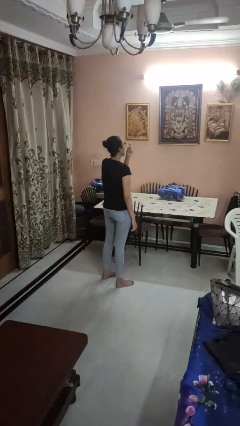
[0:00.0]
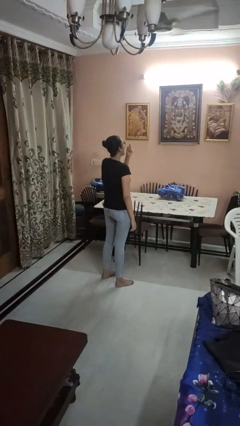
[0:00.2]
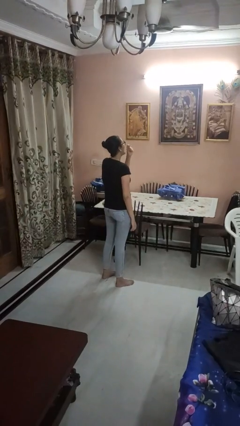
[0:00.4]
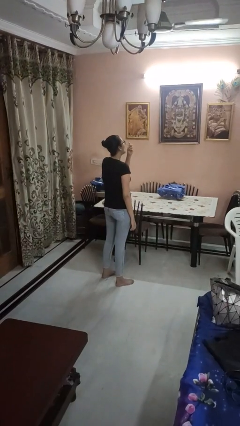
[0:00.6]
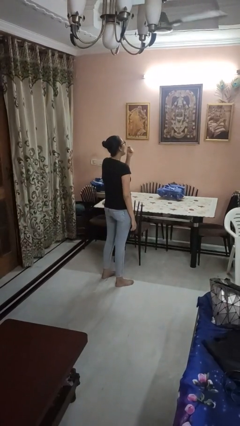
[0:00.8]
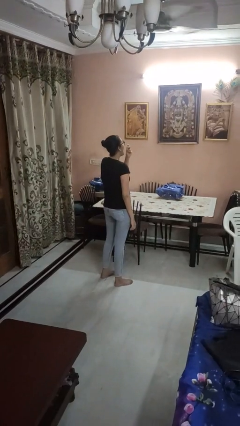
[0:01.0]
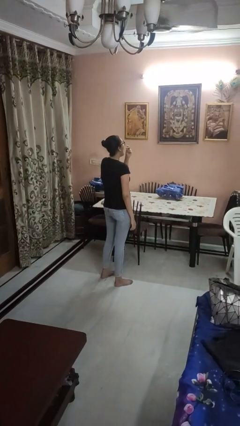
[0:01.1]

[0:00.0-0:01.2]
person yawns

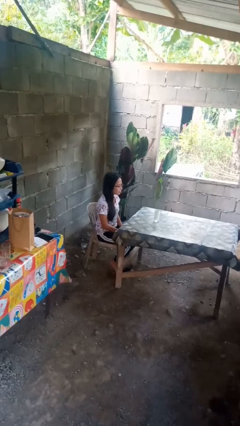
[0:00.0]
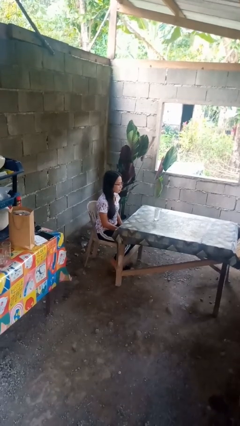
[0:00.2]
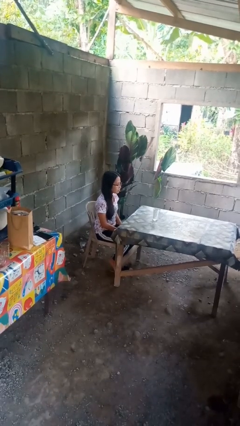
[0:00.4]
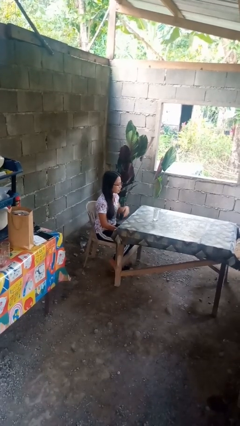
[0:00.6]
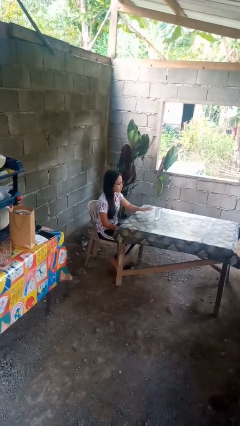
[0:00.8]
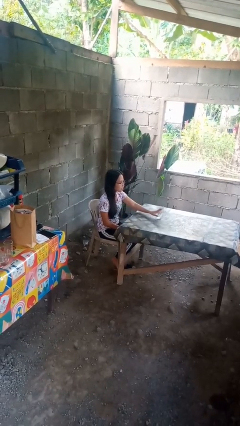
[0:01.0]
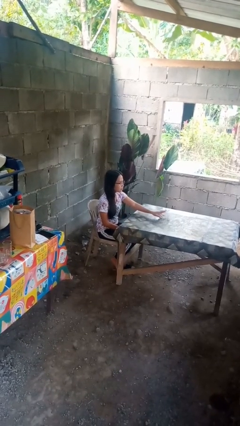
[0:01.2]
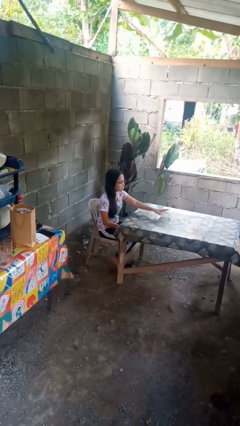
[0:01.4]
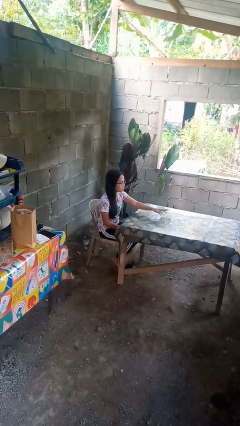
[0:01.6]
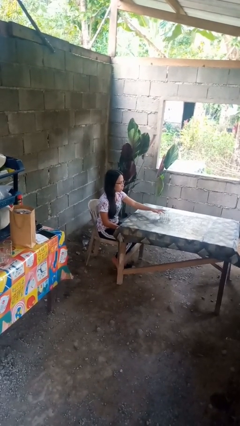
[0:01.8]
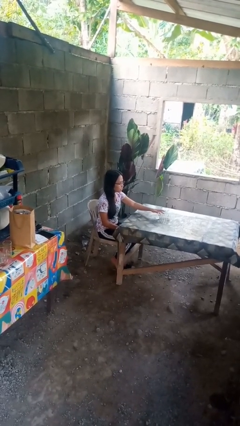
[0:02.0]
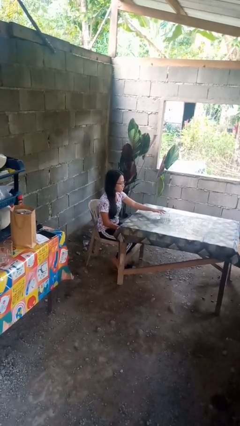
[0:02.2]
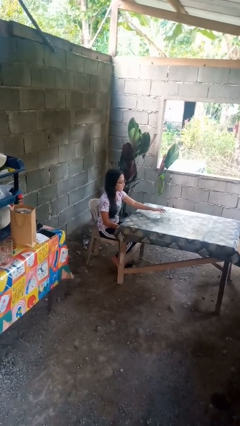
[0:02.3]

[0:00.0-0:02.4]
person knocks over glass

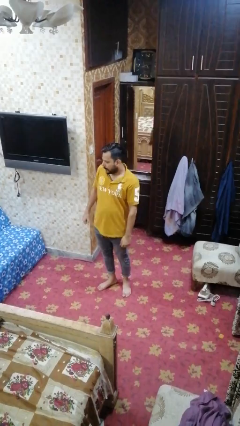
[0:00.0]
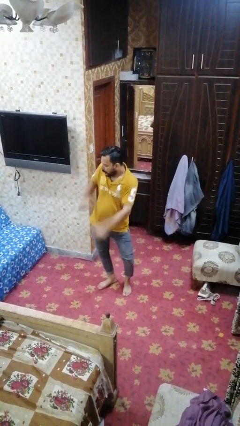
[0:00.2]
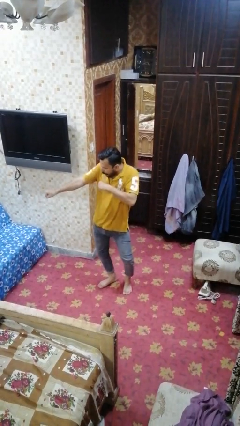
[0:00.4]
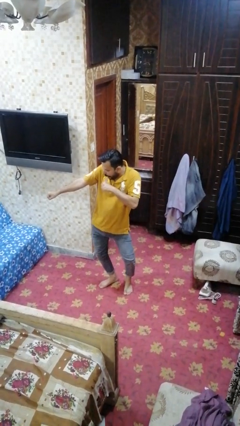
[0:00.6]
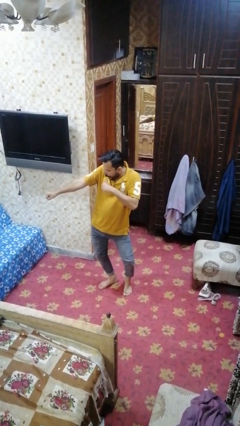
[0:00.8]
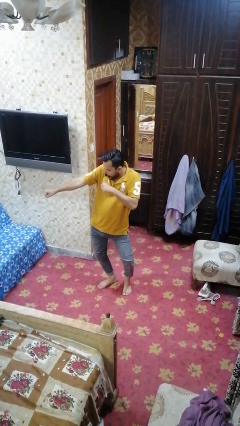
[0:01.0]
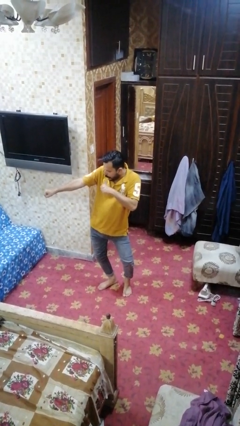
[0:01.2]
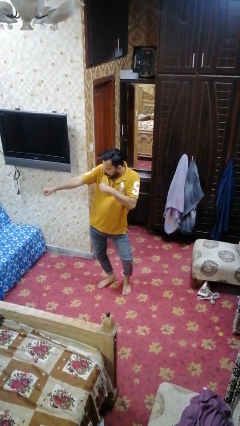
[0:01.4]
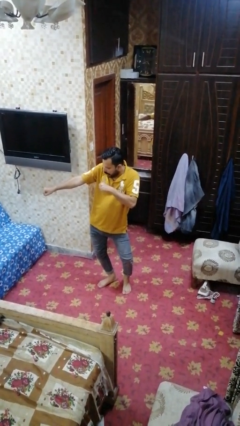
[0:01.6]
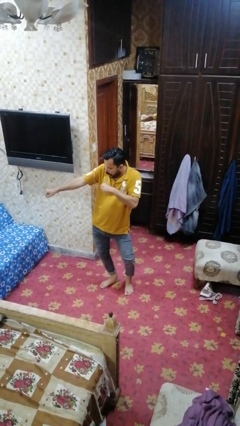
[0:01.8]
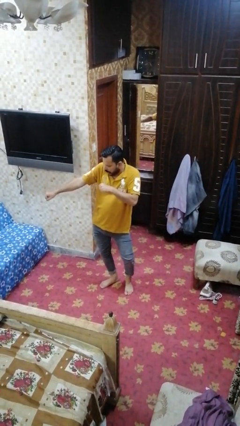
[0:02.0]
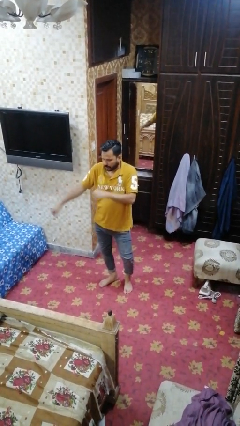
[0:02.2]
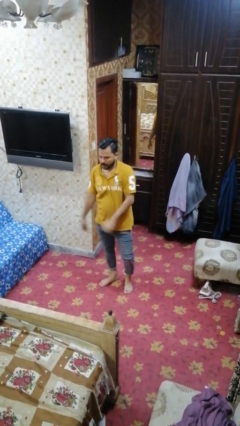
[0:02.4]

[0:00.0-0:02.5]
person karate chop

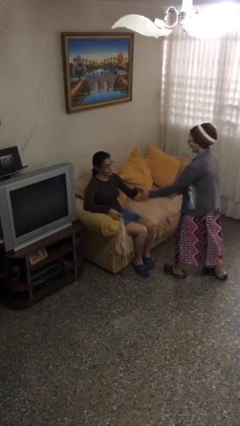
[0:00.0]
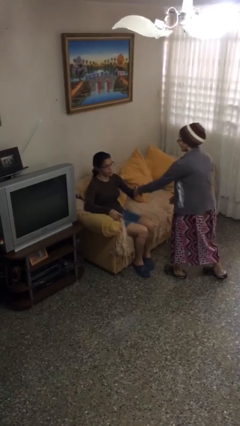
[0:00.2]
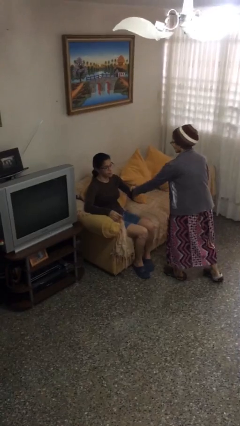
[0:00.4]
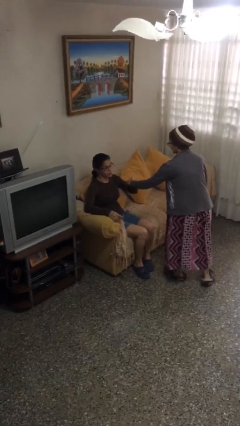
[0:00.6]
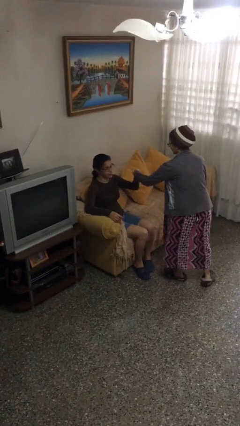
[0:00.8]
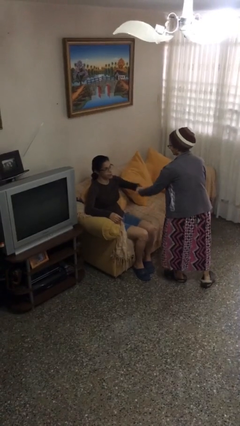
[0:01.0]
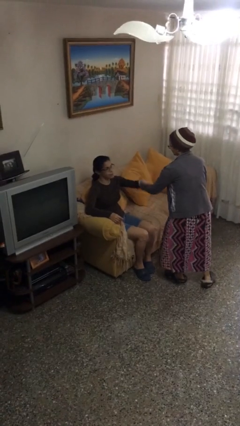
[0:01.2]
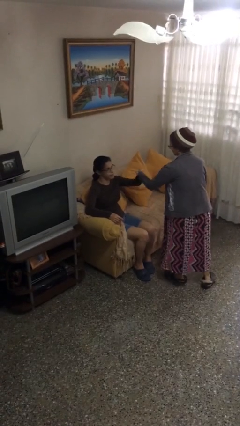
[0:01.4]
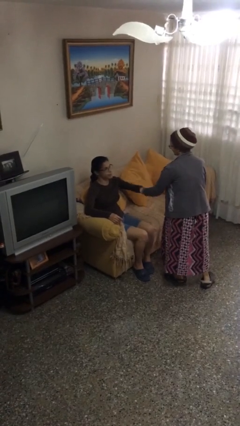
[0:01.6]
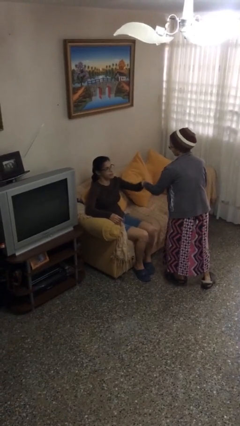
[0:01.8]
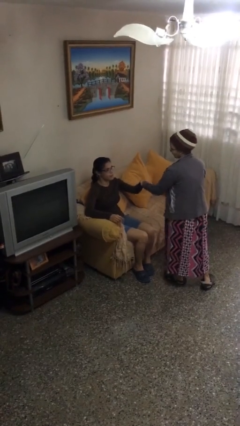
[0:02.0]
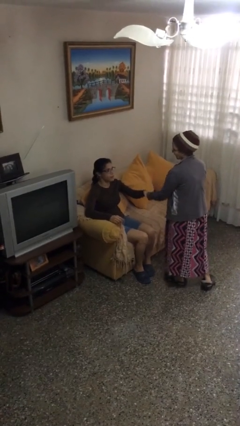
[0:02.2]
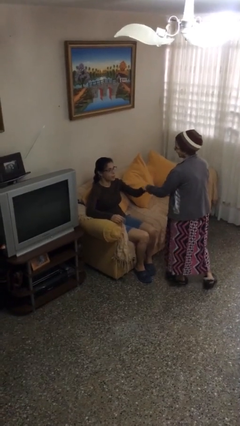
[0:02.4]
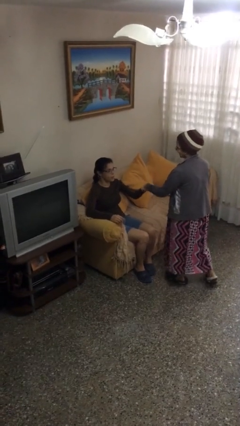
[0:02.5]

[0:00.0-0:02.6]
person shakes hand

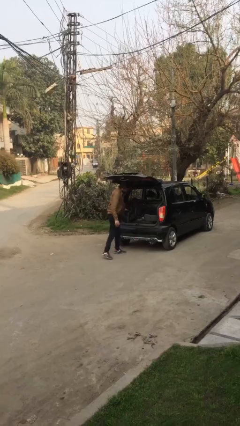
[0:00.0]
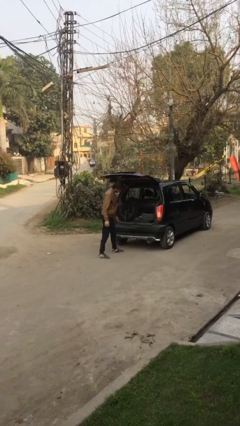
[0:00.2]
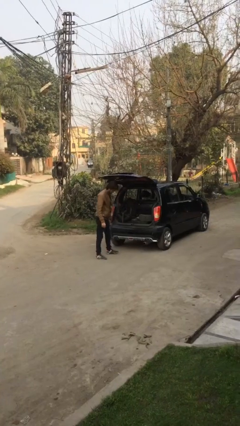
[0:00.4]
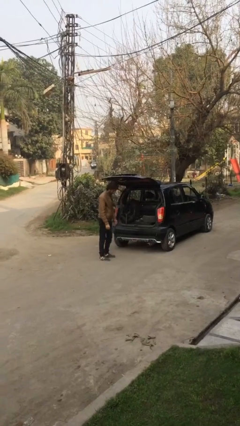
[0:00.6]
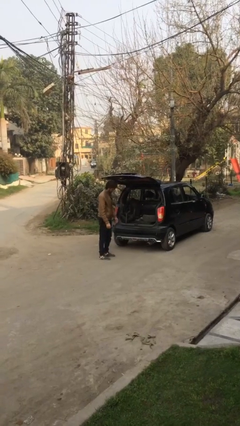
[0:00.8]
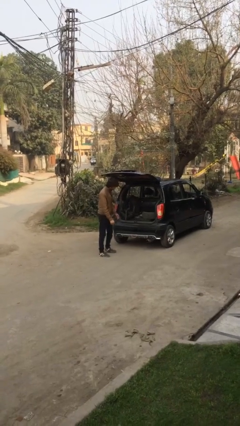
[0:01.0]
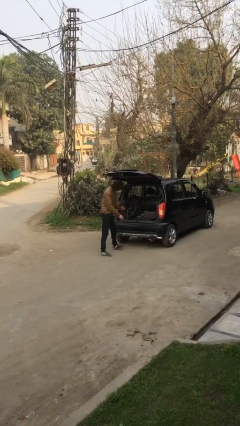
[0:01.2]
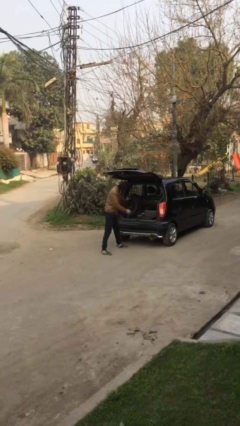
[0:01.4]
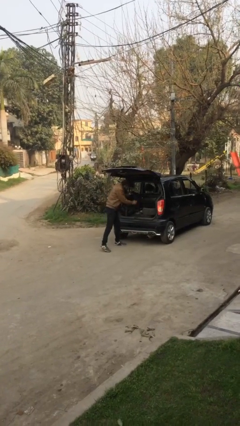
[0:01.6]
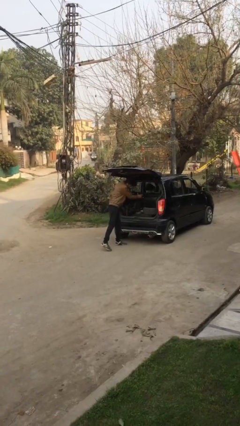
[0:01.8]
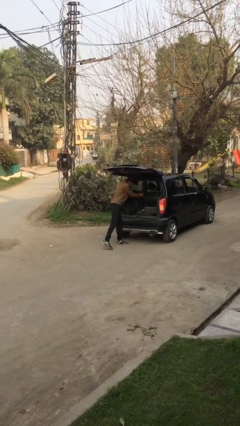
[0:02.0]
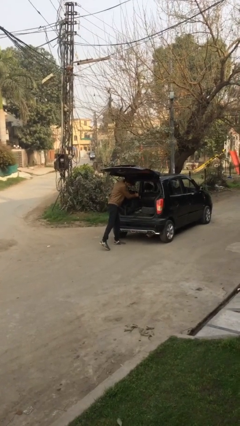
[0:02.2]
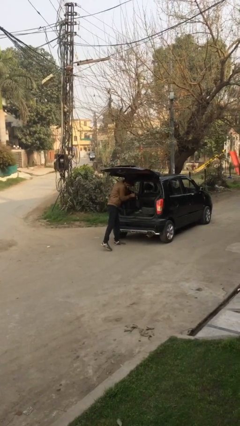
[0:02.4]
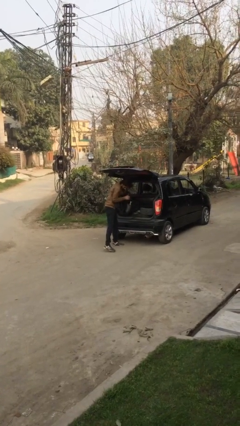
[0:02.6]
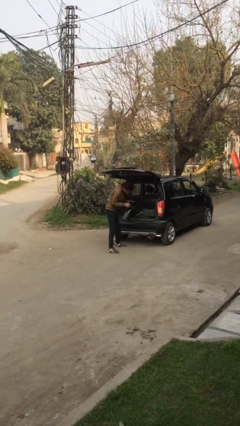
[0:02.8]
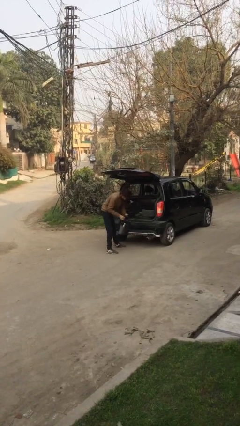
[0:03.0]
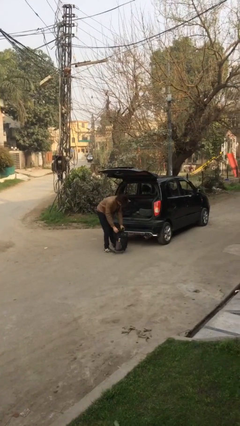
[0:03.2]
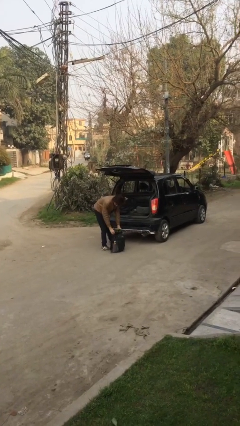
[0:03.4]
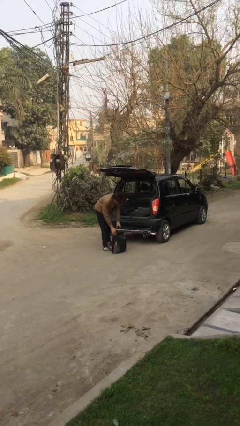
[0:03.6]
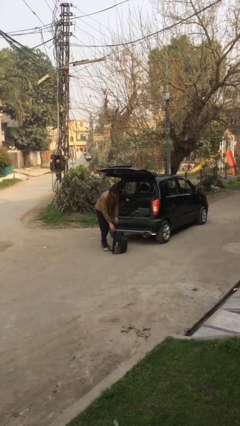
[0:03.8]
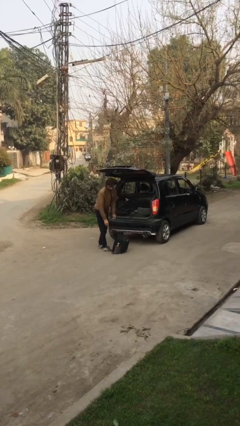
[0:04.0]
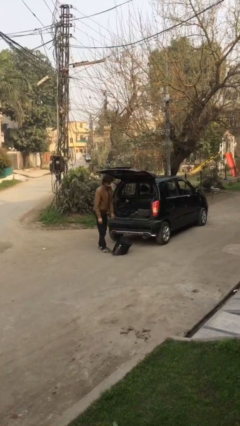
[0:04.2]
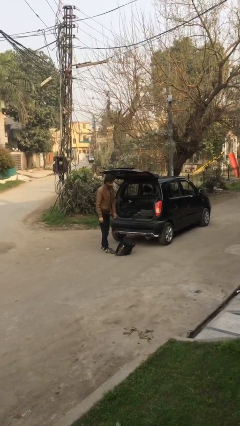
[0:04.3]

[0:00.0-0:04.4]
person unloads car

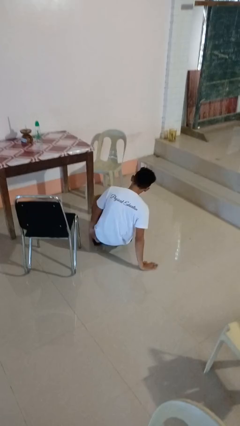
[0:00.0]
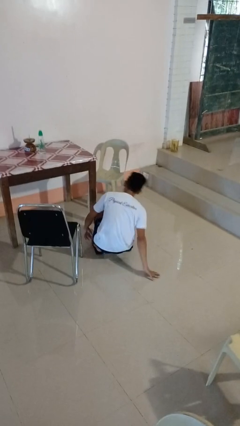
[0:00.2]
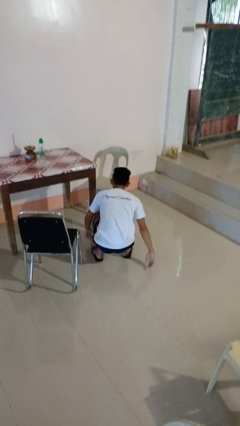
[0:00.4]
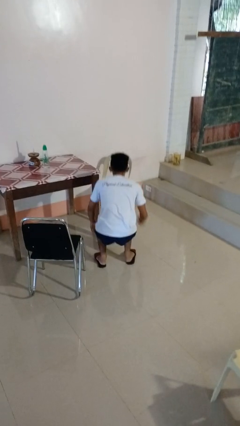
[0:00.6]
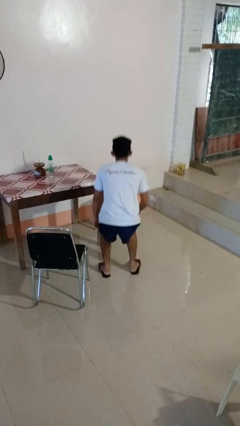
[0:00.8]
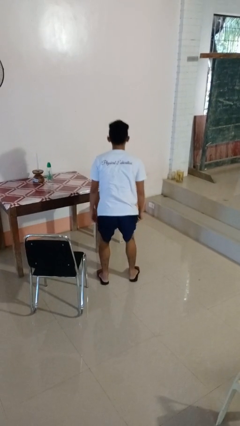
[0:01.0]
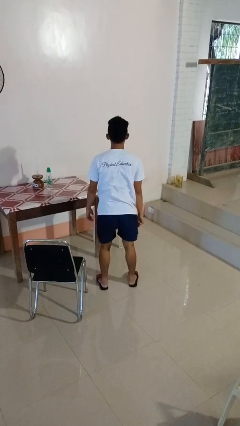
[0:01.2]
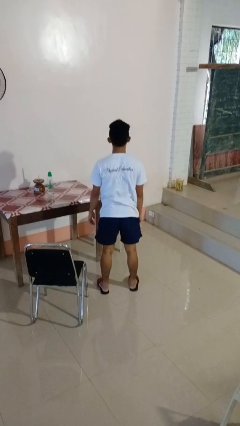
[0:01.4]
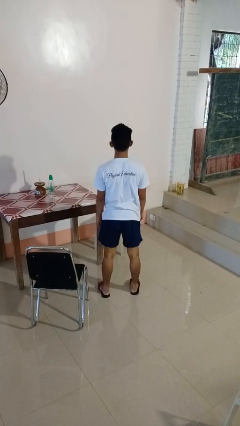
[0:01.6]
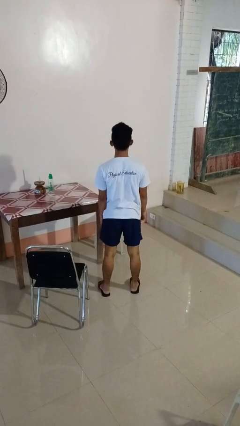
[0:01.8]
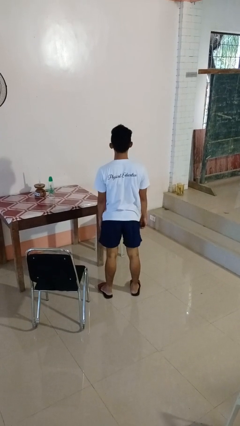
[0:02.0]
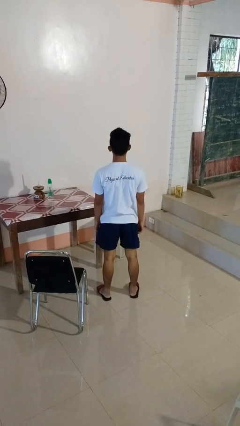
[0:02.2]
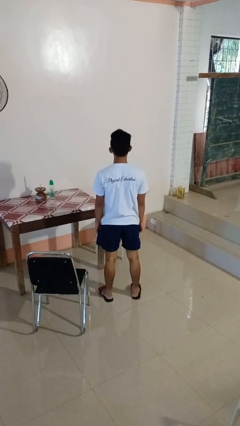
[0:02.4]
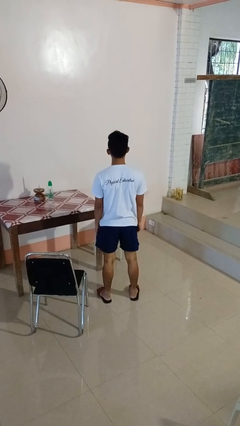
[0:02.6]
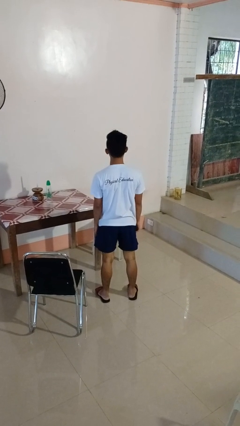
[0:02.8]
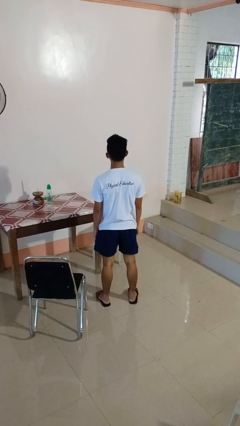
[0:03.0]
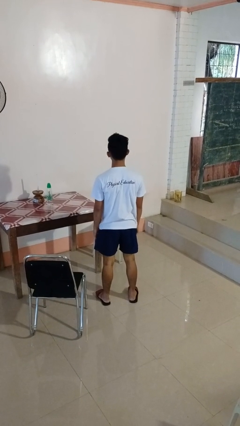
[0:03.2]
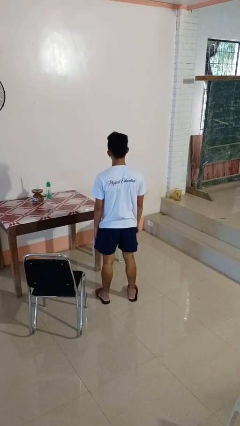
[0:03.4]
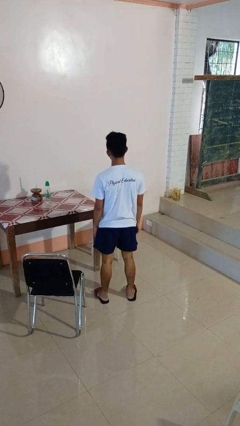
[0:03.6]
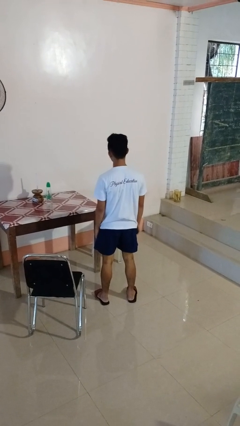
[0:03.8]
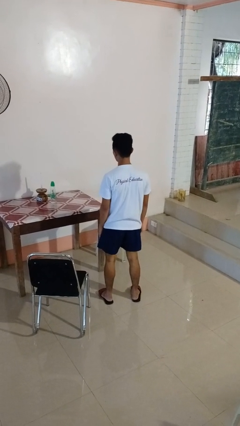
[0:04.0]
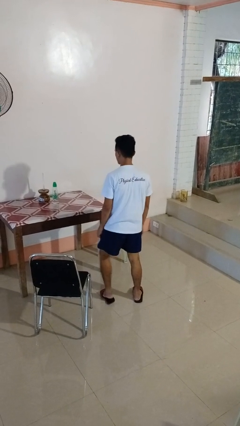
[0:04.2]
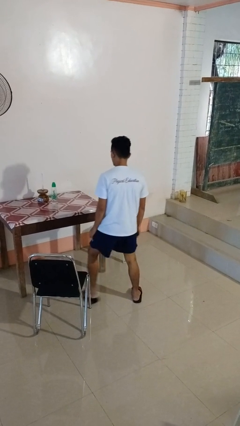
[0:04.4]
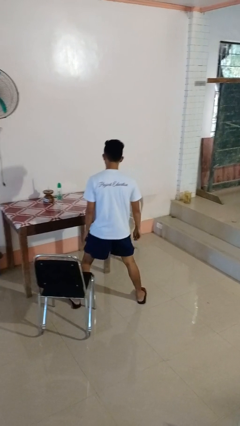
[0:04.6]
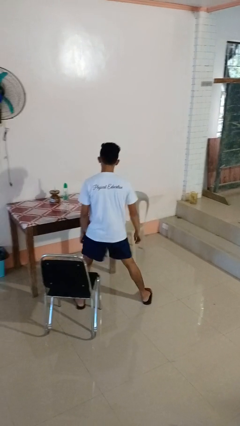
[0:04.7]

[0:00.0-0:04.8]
person stands up from floor
